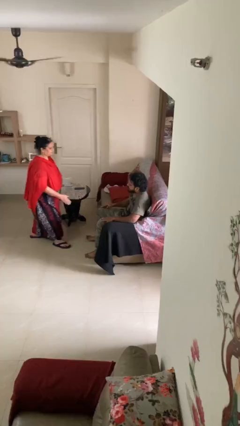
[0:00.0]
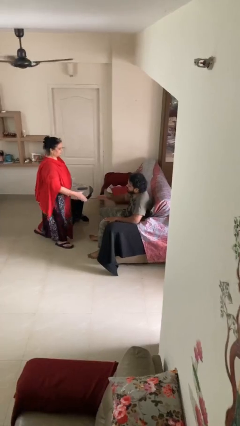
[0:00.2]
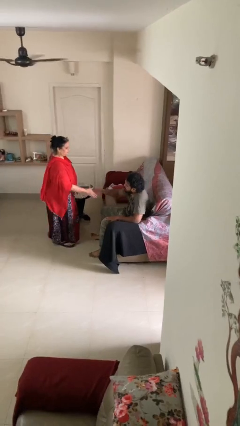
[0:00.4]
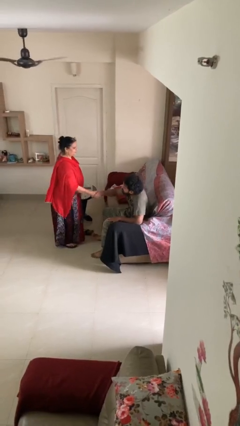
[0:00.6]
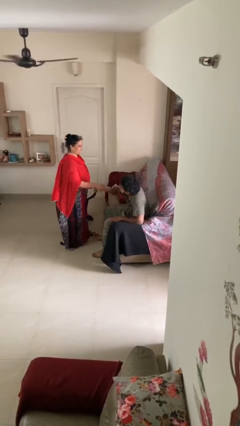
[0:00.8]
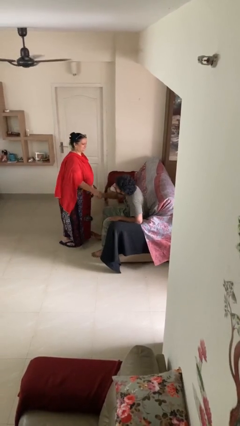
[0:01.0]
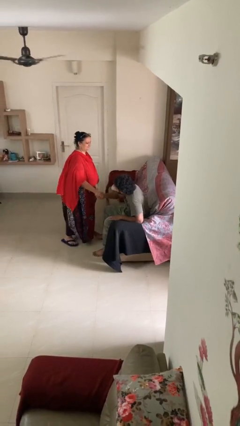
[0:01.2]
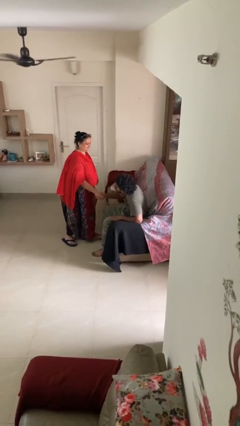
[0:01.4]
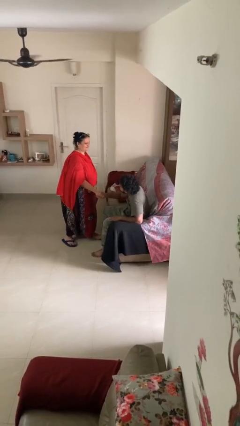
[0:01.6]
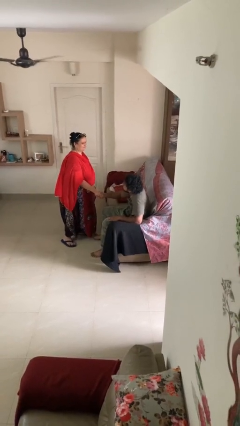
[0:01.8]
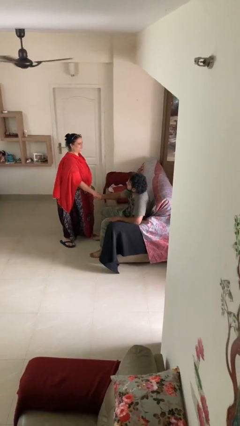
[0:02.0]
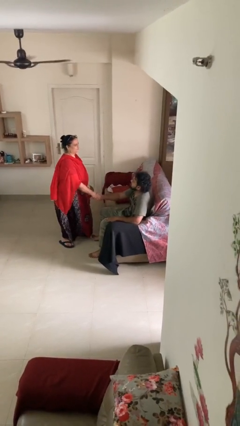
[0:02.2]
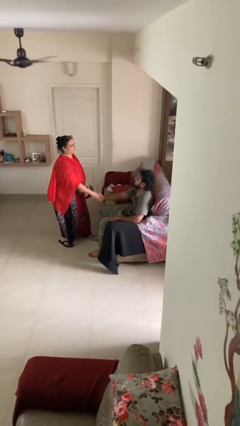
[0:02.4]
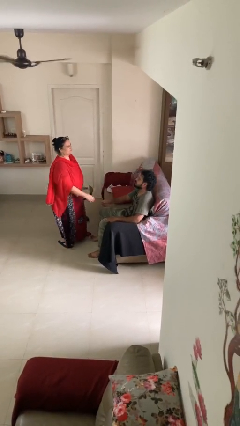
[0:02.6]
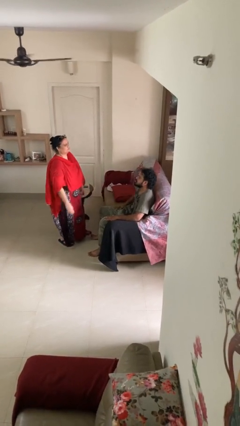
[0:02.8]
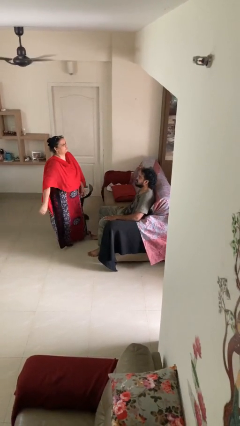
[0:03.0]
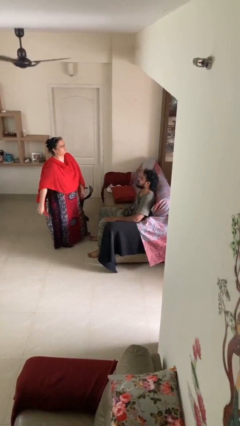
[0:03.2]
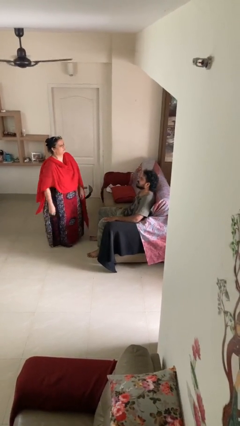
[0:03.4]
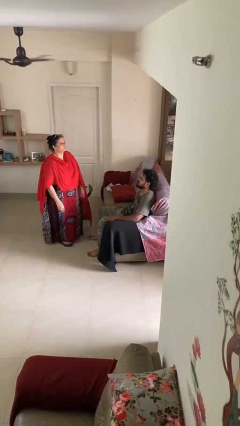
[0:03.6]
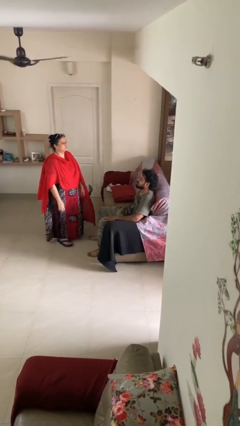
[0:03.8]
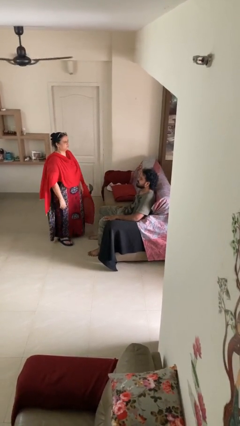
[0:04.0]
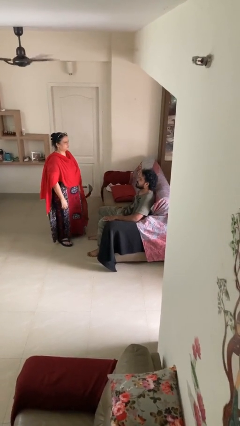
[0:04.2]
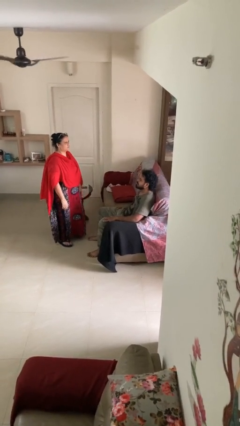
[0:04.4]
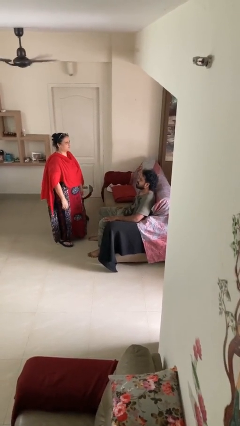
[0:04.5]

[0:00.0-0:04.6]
person shakes hand

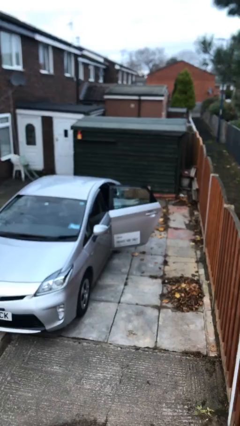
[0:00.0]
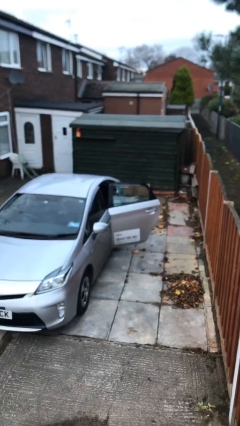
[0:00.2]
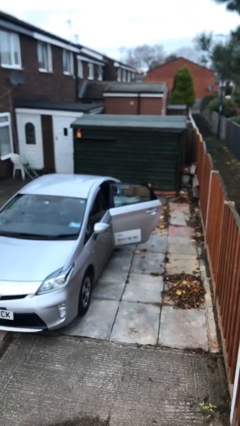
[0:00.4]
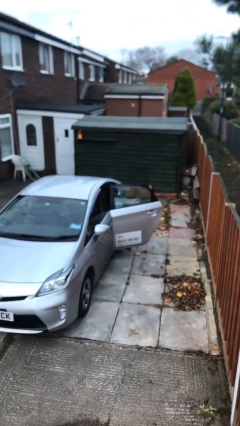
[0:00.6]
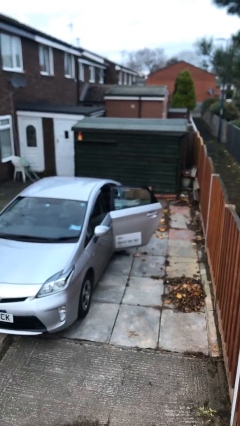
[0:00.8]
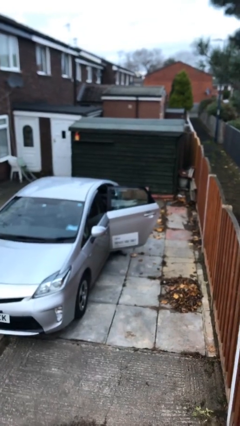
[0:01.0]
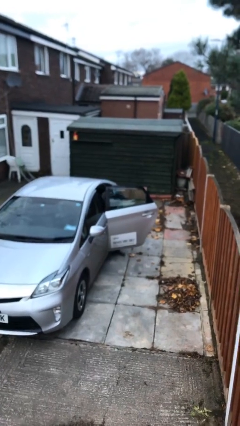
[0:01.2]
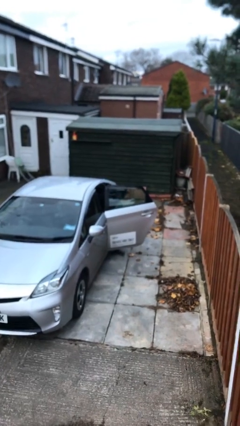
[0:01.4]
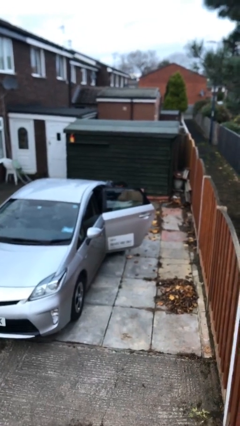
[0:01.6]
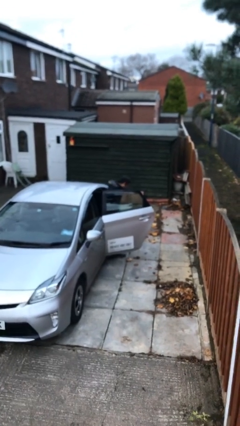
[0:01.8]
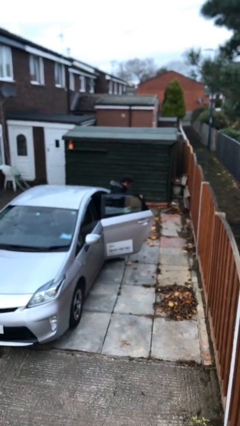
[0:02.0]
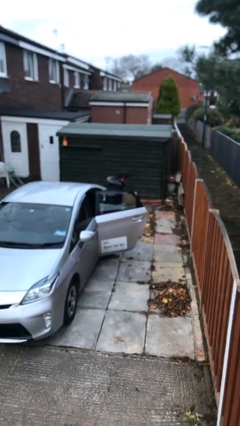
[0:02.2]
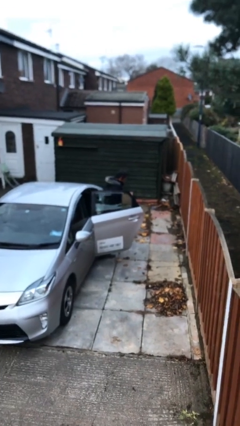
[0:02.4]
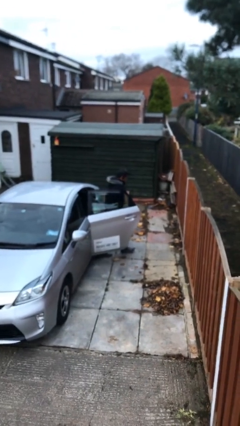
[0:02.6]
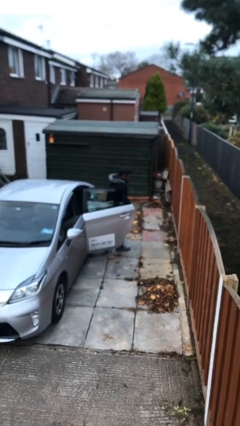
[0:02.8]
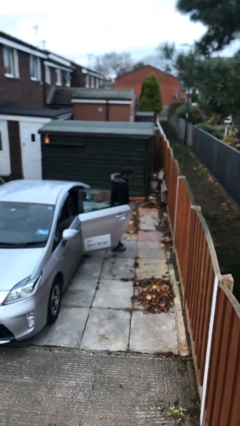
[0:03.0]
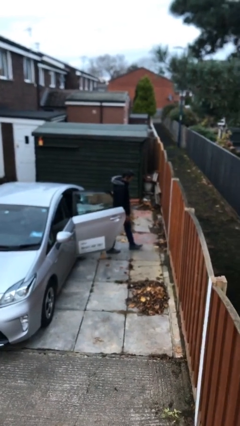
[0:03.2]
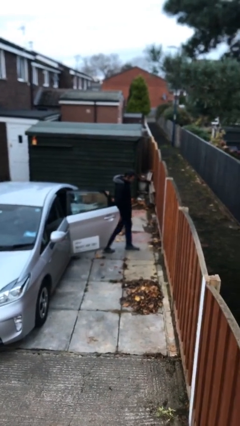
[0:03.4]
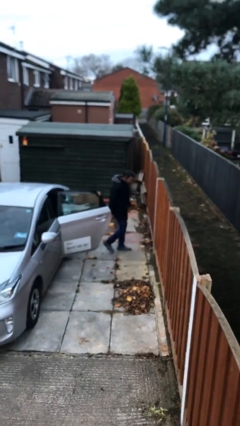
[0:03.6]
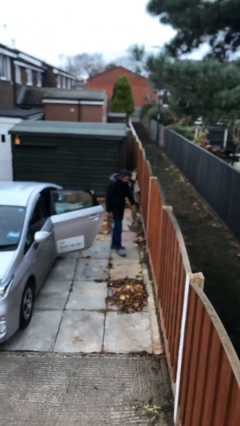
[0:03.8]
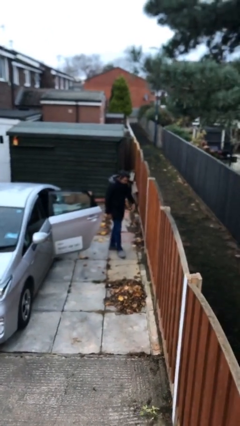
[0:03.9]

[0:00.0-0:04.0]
person exits car

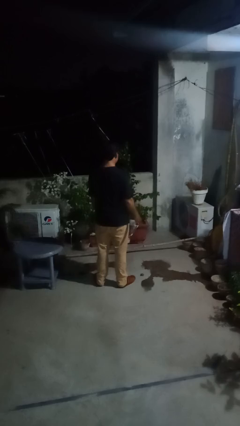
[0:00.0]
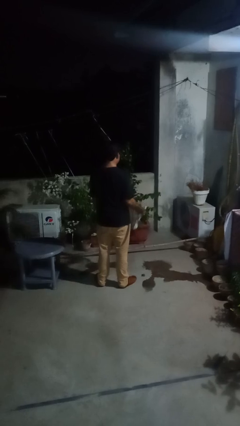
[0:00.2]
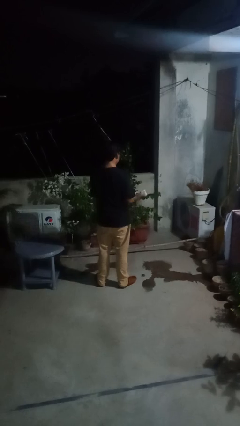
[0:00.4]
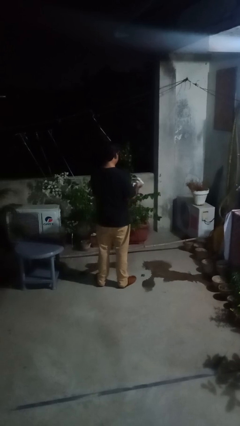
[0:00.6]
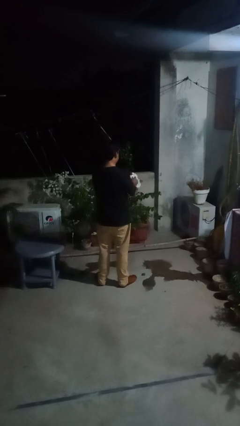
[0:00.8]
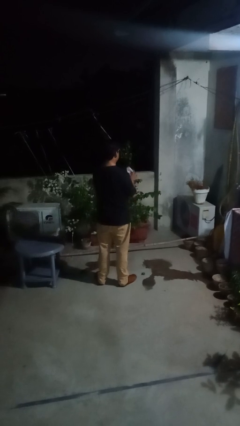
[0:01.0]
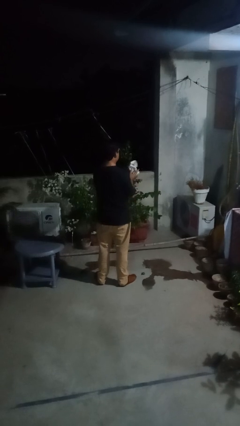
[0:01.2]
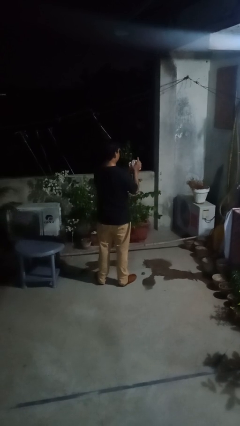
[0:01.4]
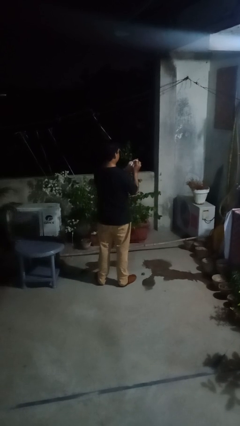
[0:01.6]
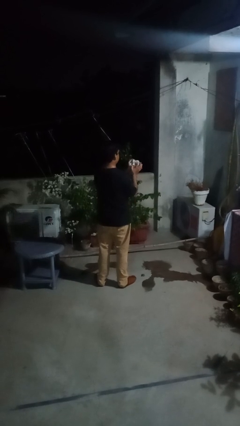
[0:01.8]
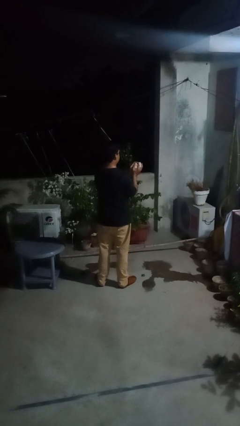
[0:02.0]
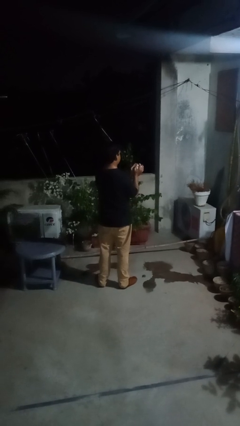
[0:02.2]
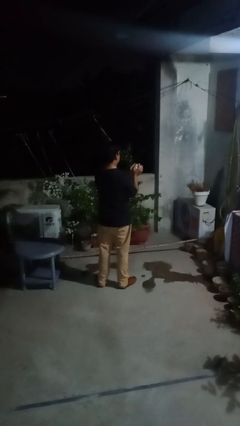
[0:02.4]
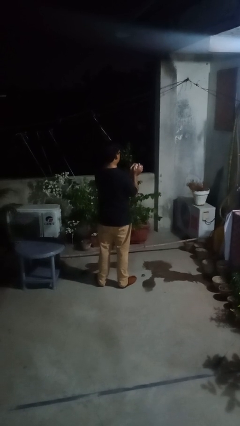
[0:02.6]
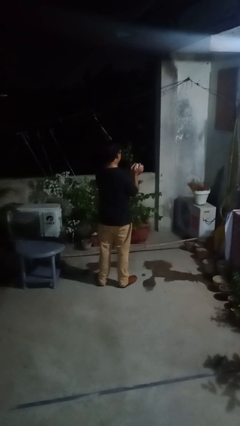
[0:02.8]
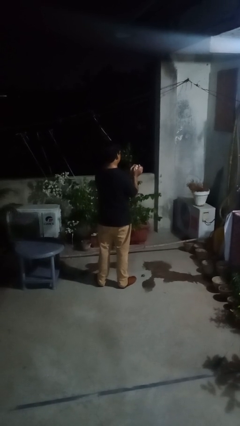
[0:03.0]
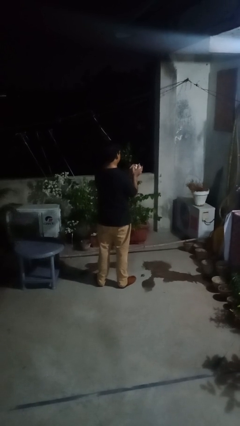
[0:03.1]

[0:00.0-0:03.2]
person crumples paper

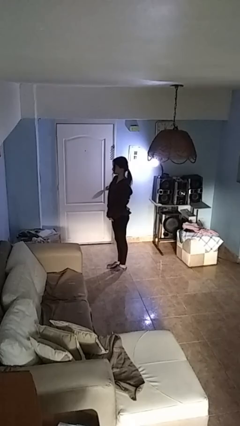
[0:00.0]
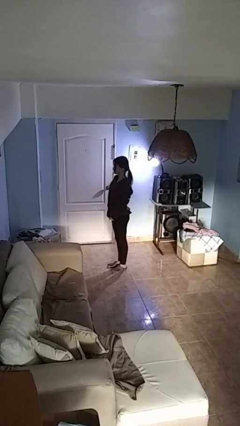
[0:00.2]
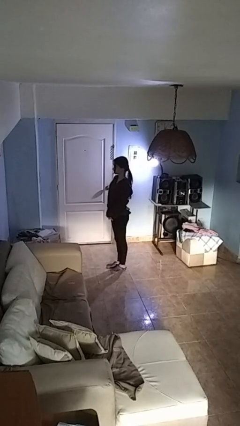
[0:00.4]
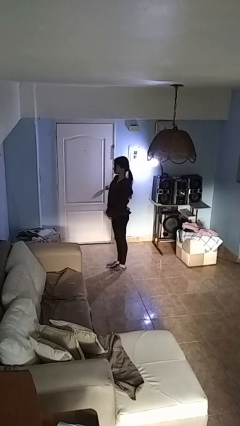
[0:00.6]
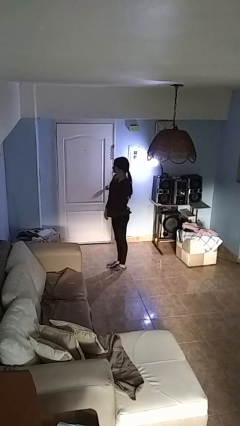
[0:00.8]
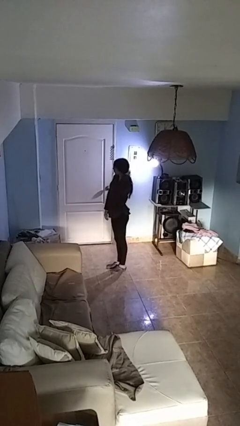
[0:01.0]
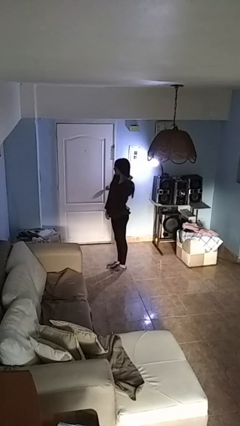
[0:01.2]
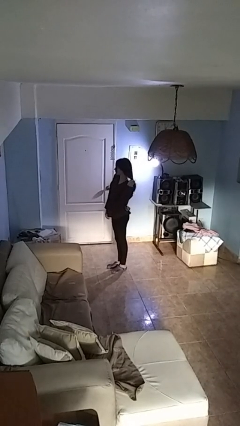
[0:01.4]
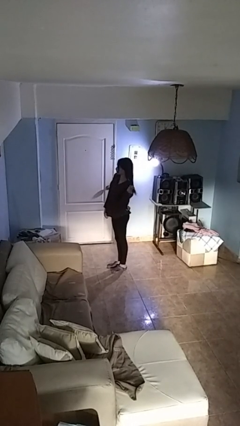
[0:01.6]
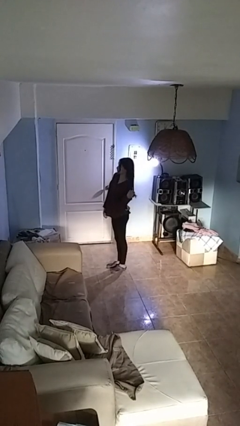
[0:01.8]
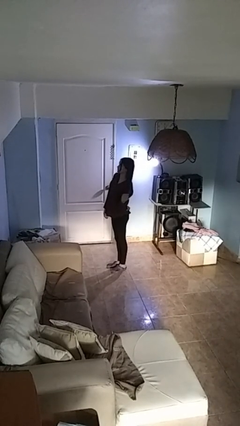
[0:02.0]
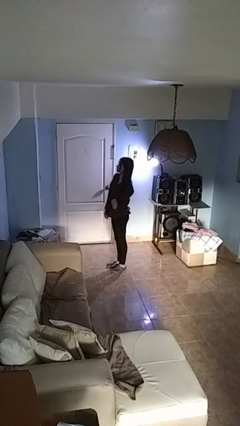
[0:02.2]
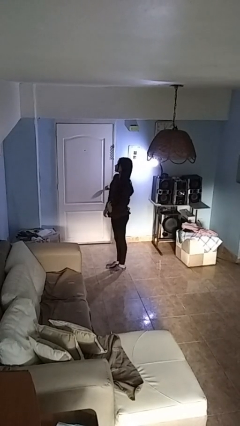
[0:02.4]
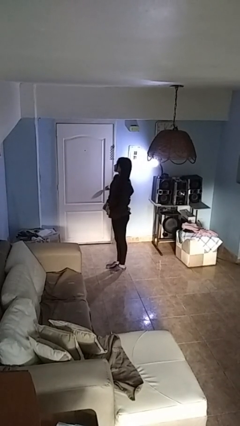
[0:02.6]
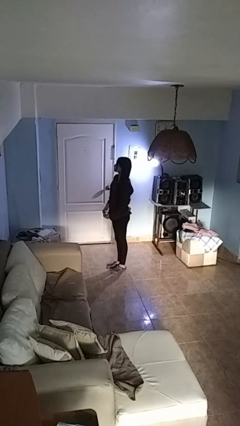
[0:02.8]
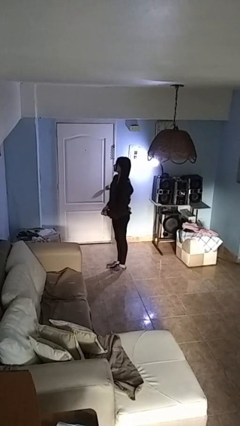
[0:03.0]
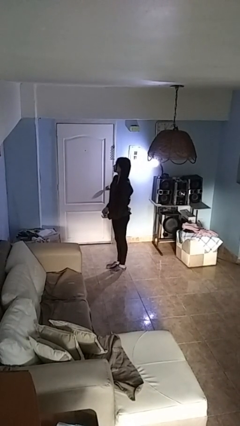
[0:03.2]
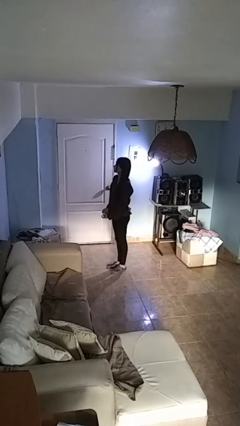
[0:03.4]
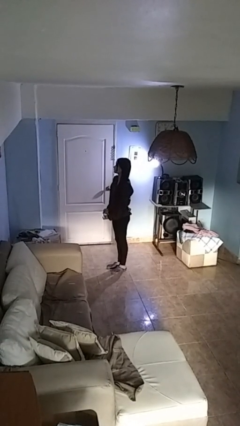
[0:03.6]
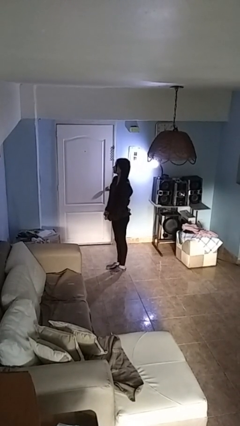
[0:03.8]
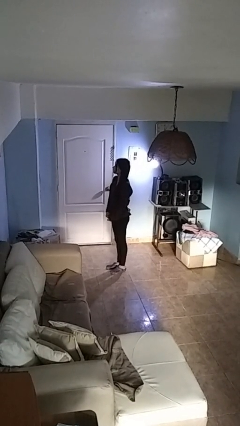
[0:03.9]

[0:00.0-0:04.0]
person takes off hairtie

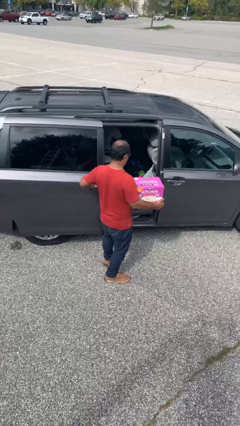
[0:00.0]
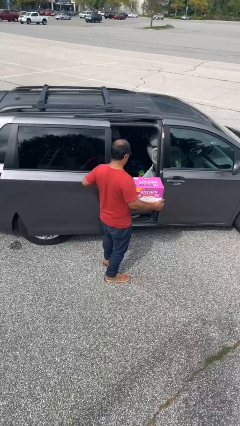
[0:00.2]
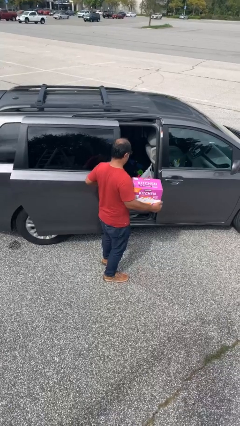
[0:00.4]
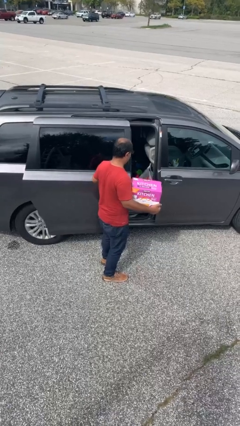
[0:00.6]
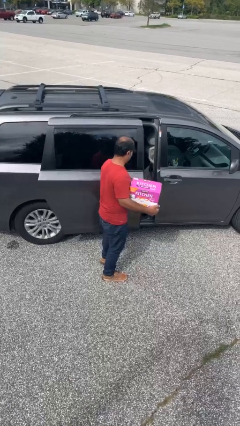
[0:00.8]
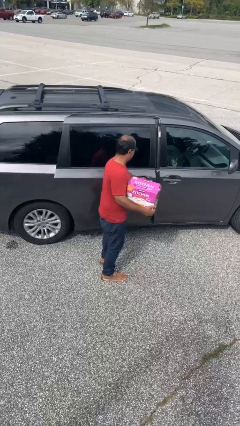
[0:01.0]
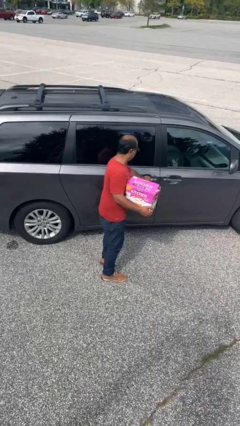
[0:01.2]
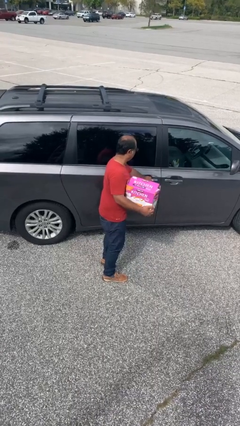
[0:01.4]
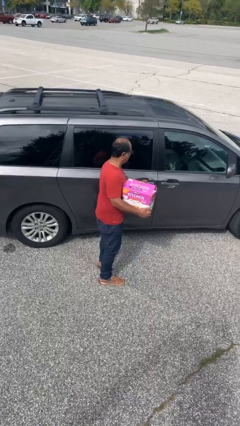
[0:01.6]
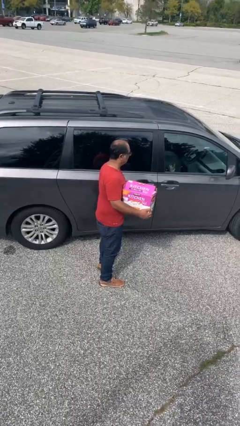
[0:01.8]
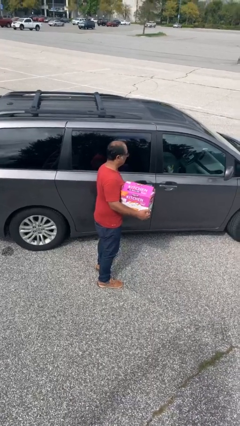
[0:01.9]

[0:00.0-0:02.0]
person closes car door
